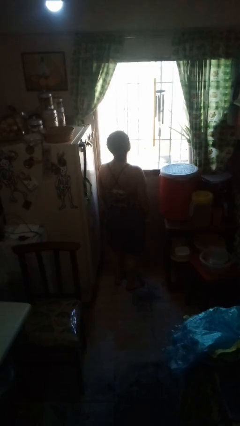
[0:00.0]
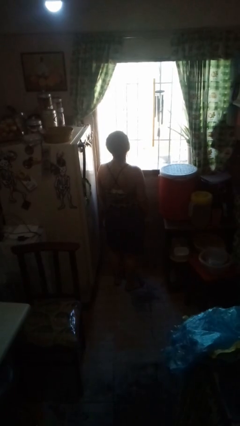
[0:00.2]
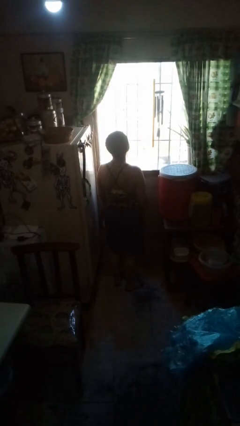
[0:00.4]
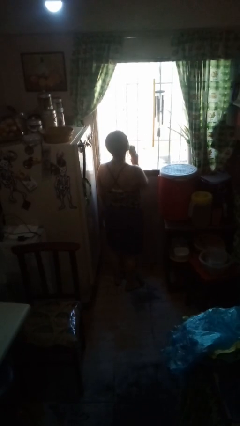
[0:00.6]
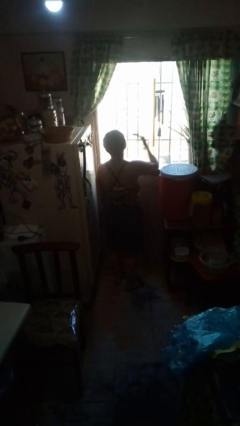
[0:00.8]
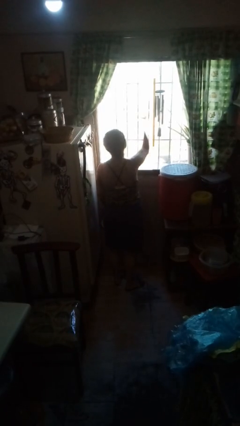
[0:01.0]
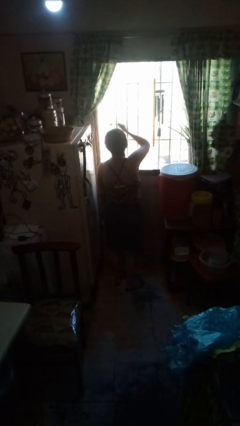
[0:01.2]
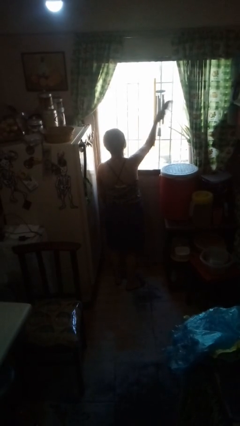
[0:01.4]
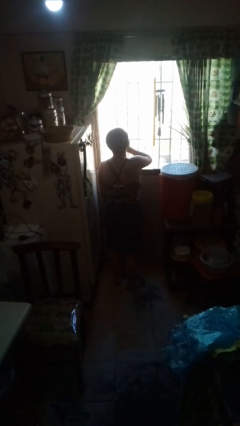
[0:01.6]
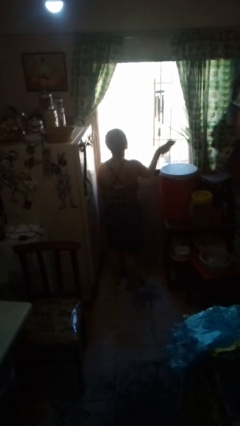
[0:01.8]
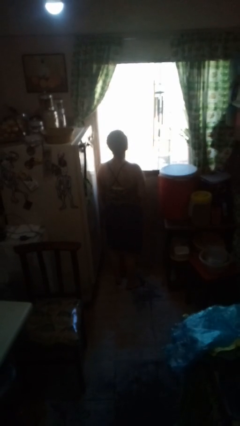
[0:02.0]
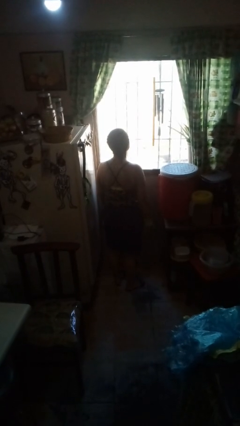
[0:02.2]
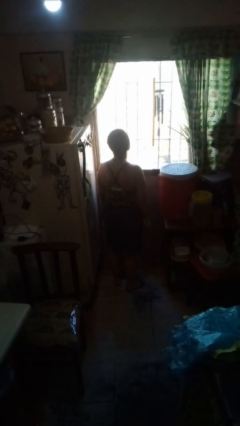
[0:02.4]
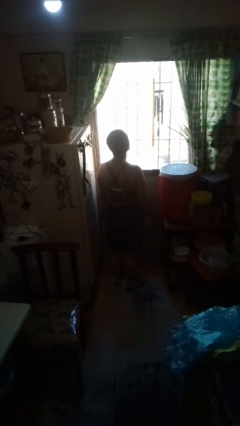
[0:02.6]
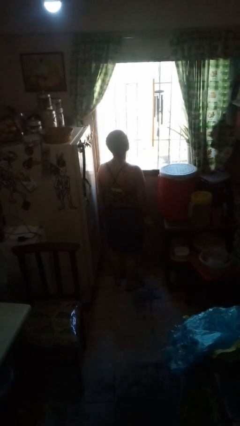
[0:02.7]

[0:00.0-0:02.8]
person washes window

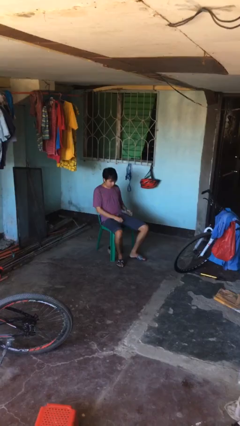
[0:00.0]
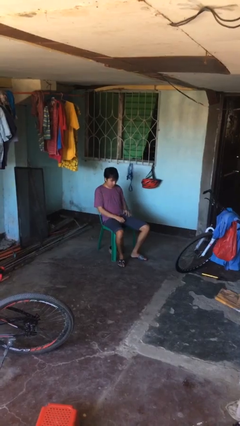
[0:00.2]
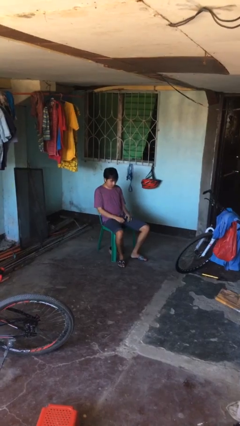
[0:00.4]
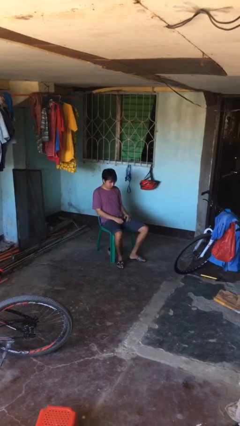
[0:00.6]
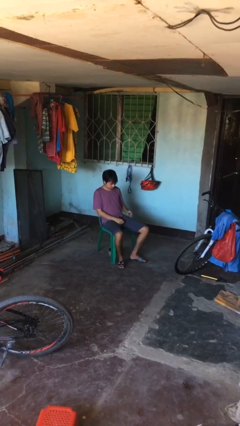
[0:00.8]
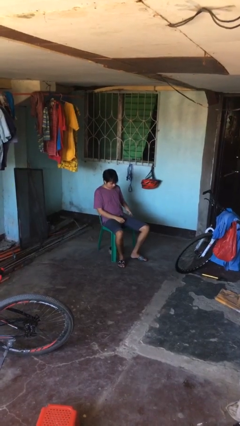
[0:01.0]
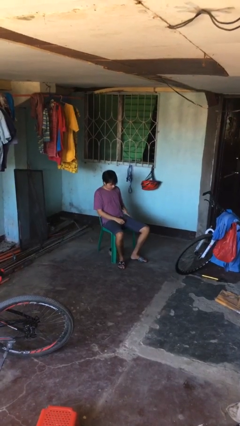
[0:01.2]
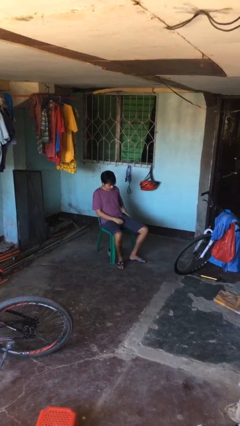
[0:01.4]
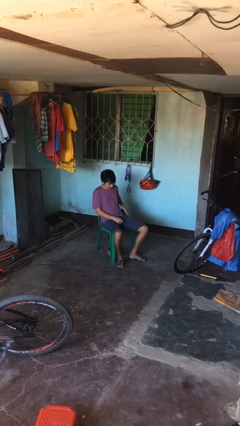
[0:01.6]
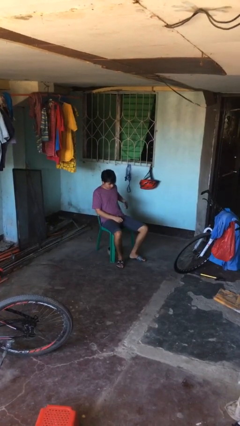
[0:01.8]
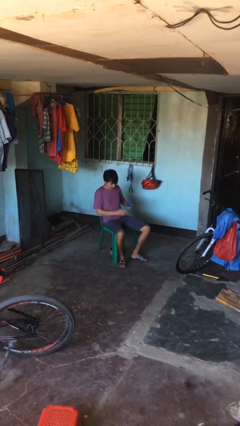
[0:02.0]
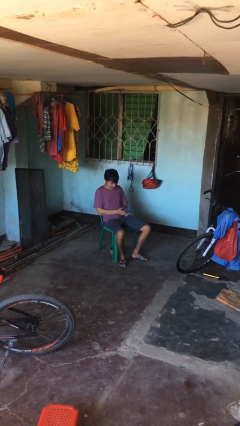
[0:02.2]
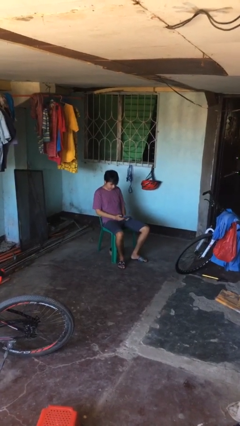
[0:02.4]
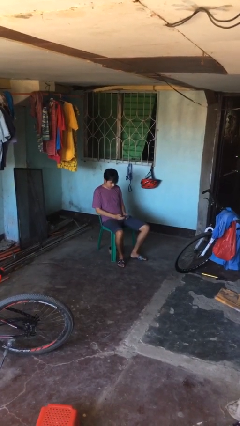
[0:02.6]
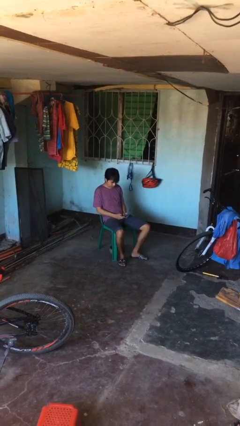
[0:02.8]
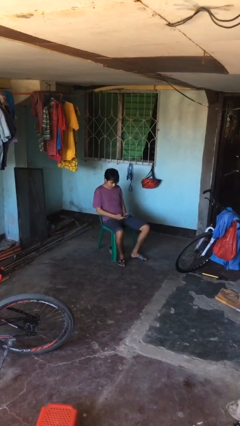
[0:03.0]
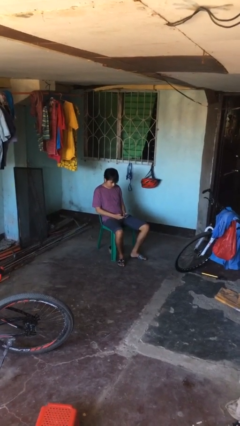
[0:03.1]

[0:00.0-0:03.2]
person takes phone from pocket

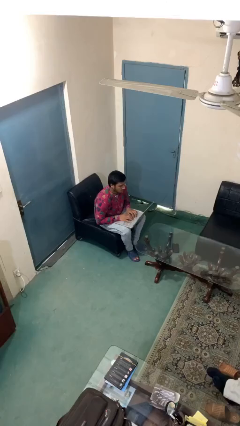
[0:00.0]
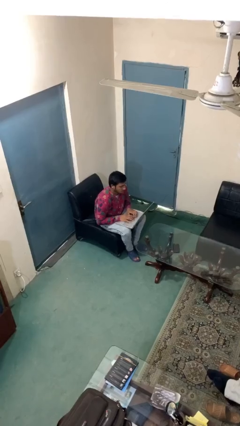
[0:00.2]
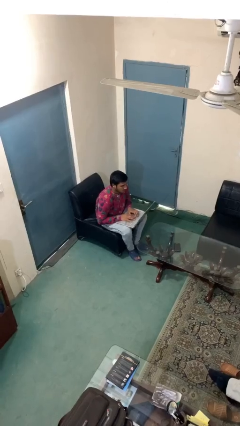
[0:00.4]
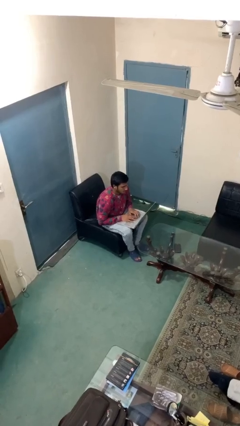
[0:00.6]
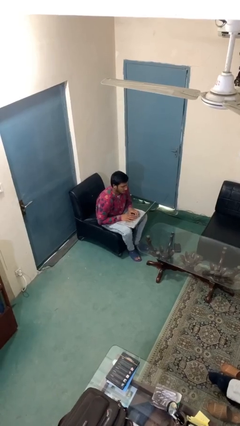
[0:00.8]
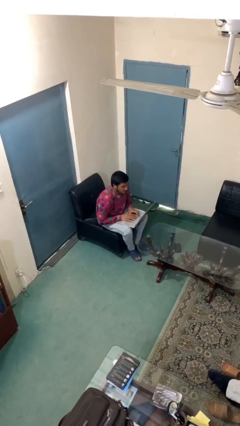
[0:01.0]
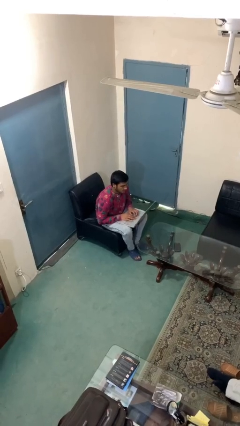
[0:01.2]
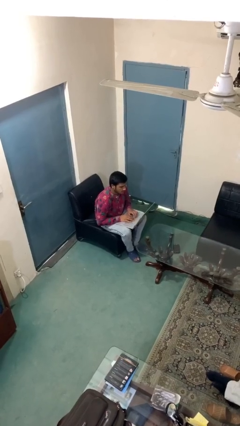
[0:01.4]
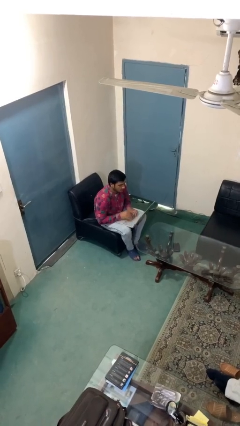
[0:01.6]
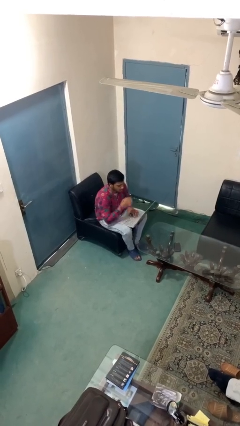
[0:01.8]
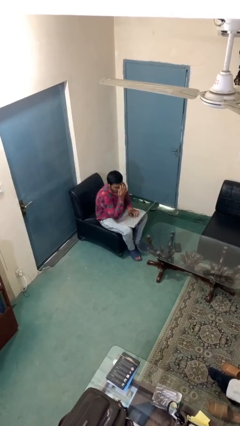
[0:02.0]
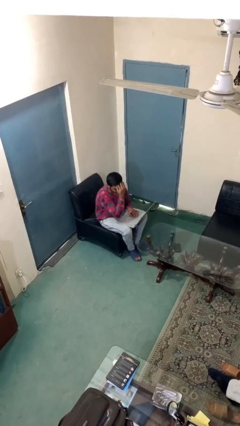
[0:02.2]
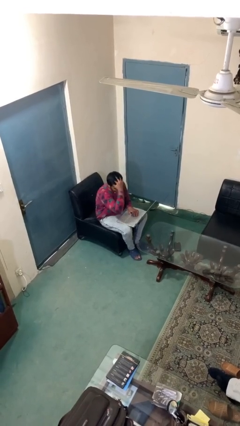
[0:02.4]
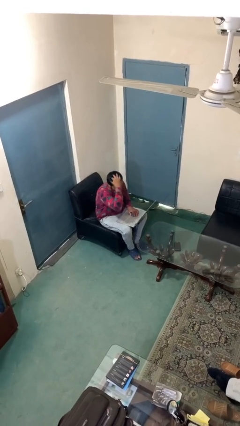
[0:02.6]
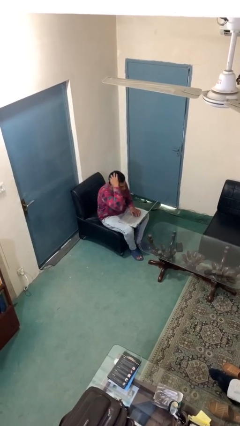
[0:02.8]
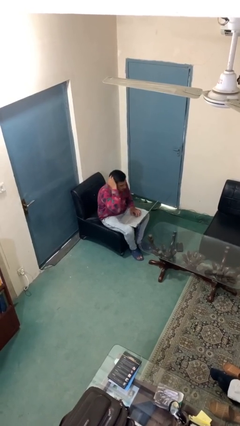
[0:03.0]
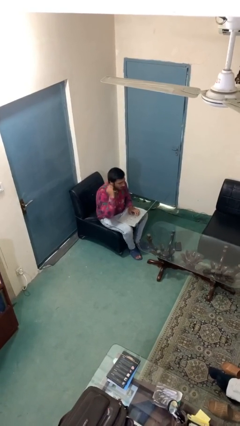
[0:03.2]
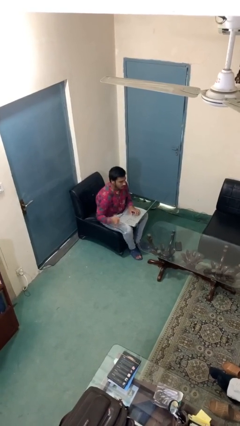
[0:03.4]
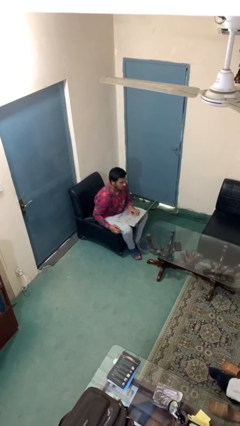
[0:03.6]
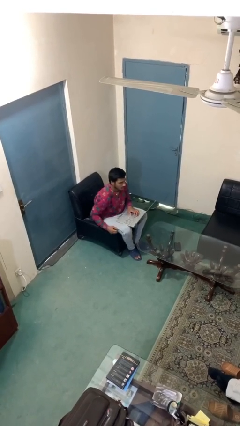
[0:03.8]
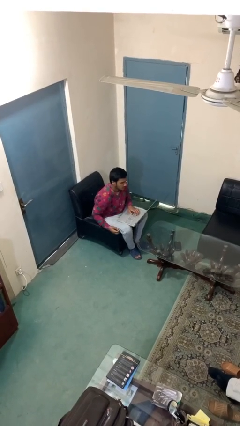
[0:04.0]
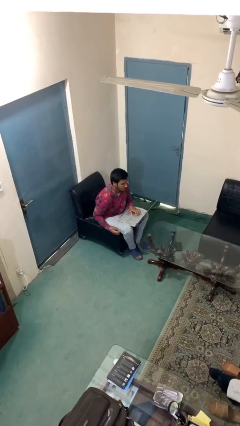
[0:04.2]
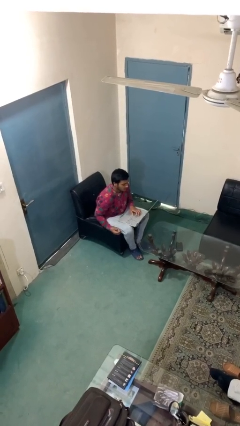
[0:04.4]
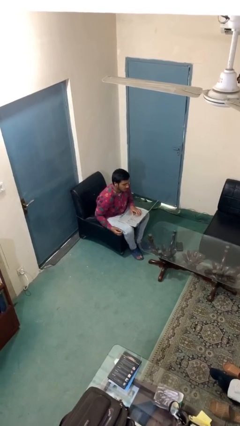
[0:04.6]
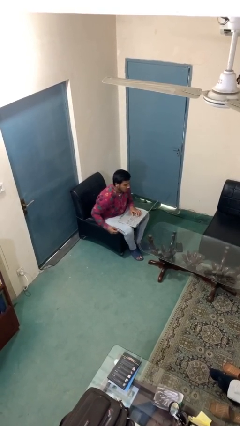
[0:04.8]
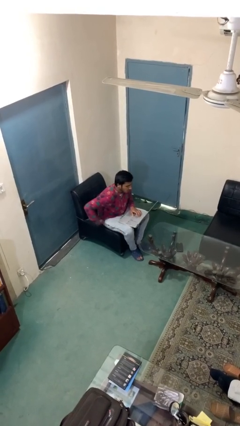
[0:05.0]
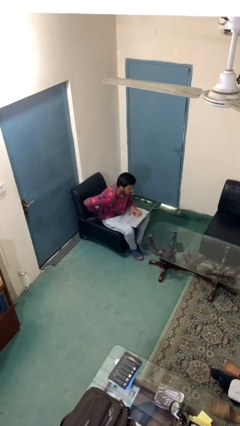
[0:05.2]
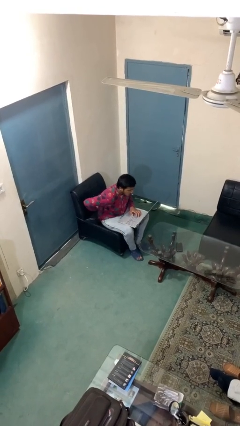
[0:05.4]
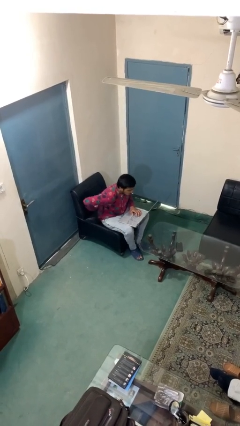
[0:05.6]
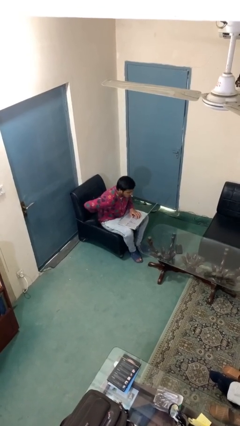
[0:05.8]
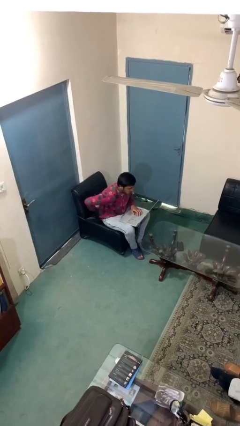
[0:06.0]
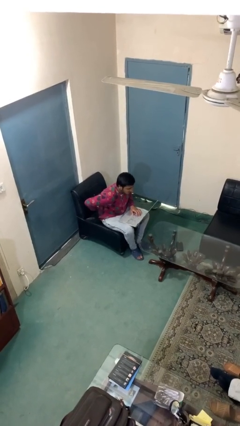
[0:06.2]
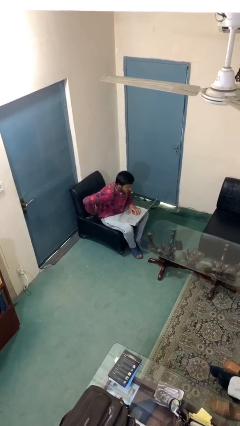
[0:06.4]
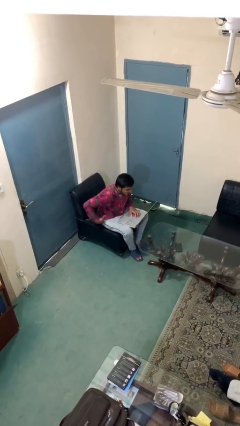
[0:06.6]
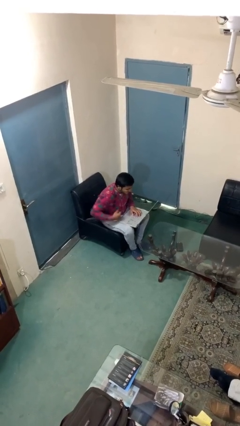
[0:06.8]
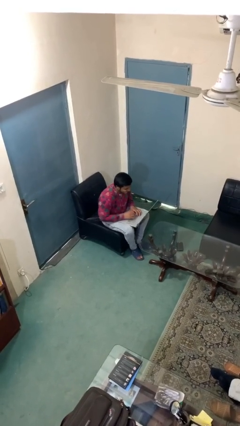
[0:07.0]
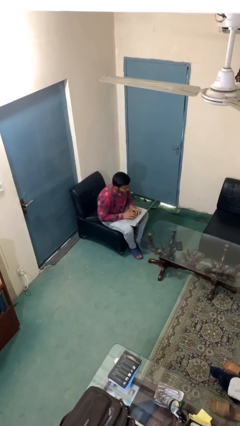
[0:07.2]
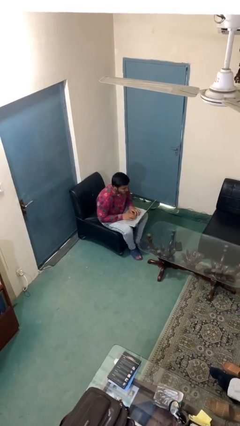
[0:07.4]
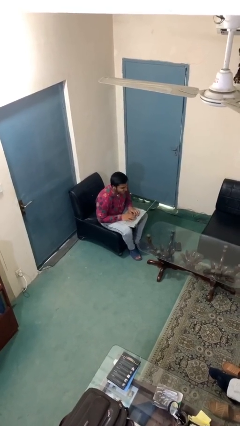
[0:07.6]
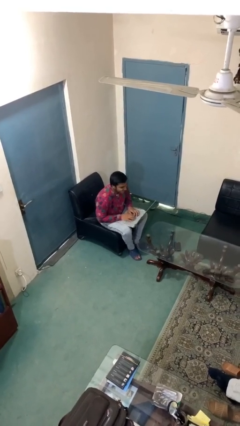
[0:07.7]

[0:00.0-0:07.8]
person interacts with laptop

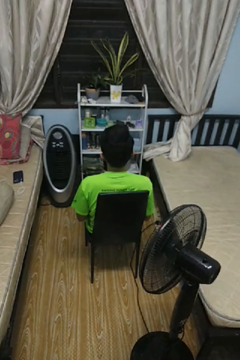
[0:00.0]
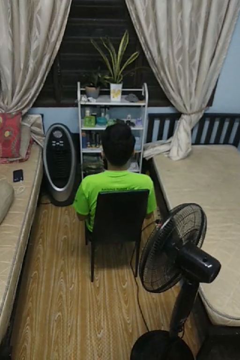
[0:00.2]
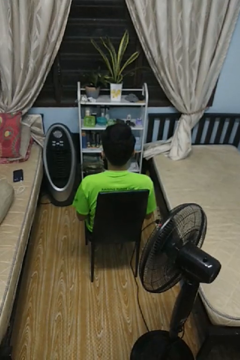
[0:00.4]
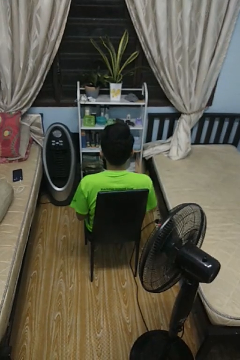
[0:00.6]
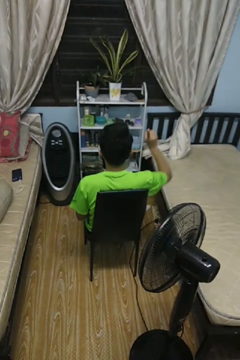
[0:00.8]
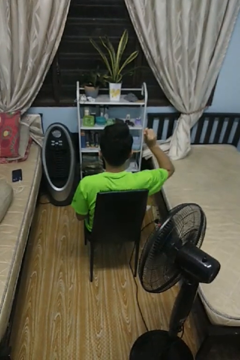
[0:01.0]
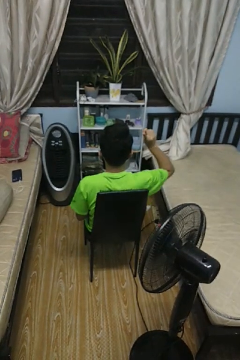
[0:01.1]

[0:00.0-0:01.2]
person gestures number one

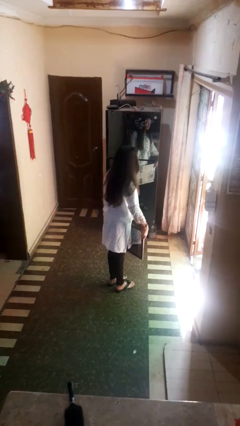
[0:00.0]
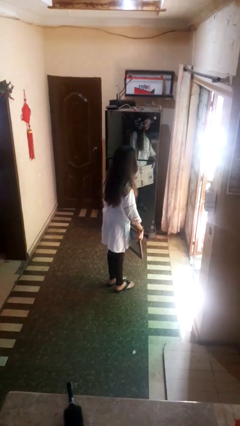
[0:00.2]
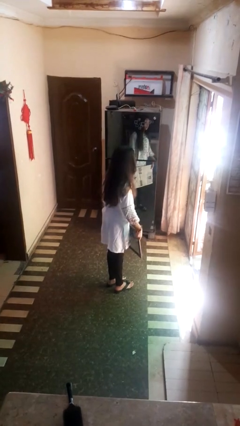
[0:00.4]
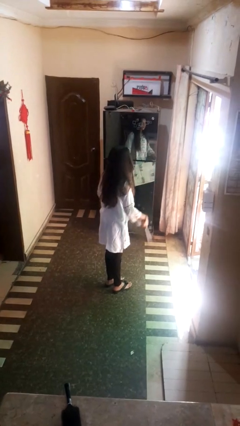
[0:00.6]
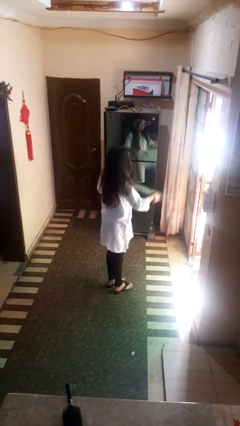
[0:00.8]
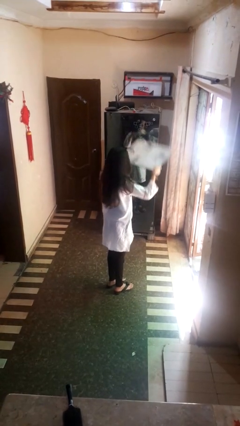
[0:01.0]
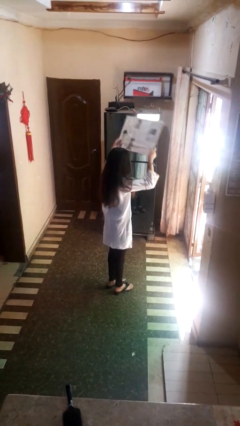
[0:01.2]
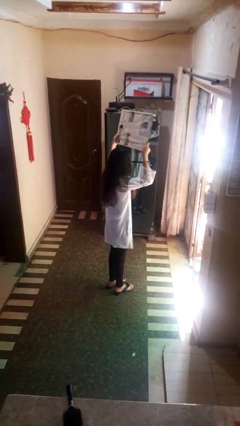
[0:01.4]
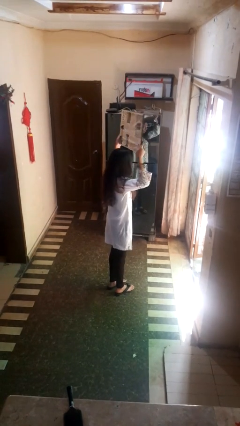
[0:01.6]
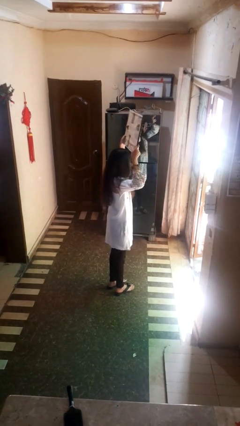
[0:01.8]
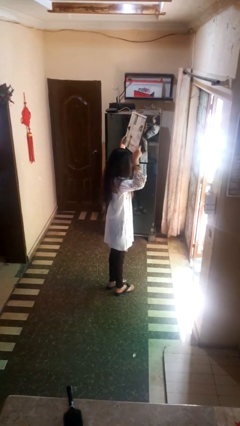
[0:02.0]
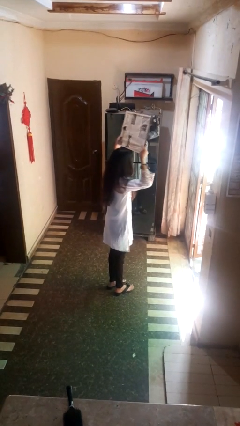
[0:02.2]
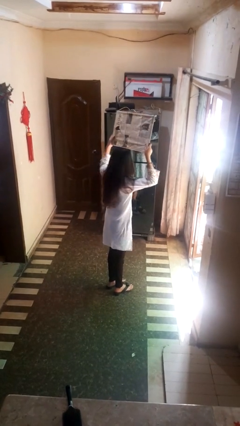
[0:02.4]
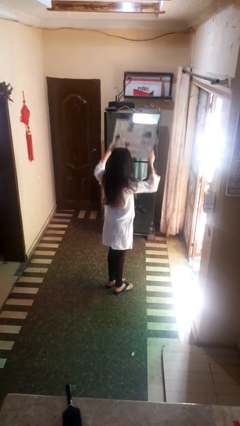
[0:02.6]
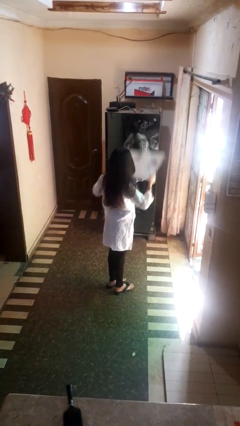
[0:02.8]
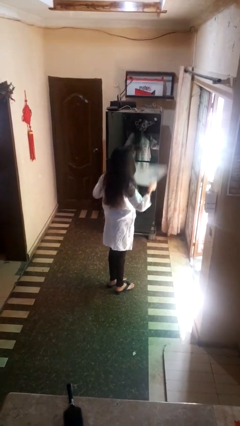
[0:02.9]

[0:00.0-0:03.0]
person holds object above head
